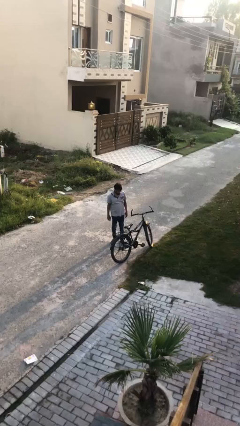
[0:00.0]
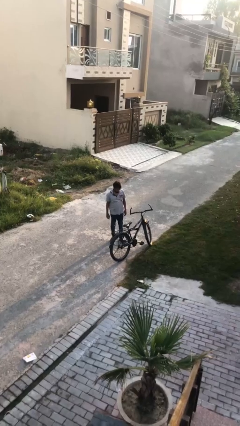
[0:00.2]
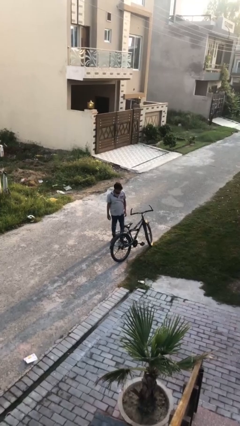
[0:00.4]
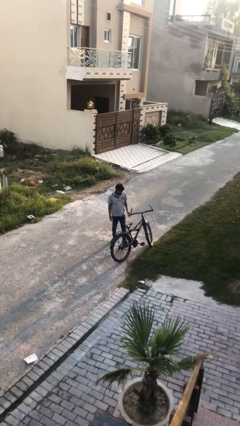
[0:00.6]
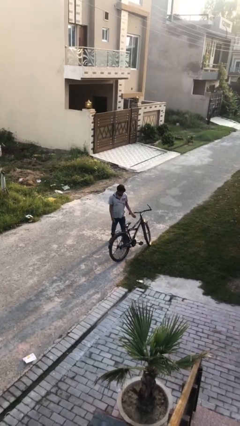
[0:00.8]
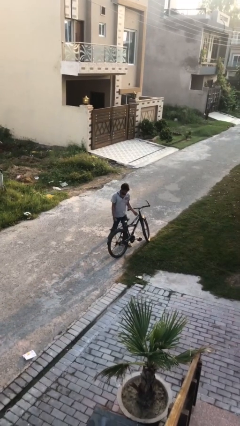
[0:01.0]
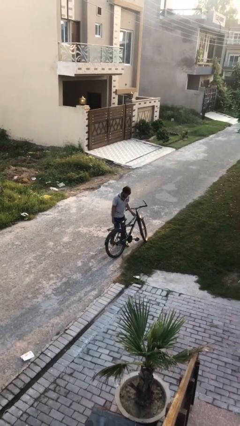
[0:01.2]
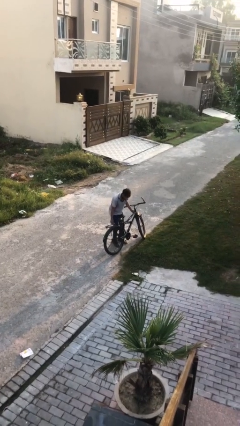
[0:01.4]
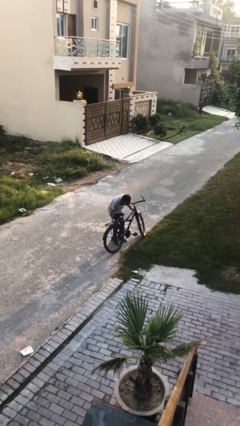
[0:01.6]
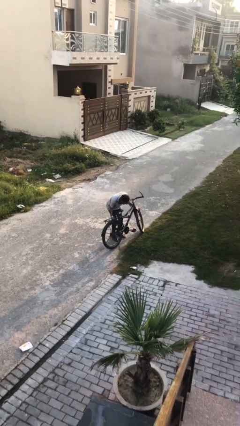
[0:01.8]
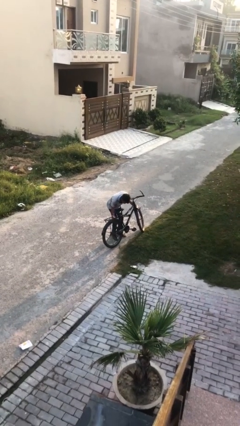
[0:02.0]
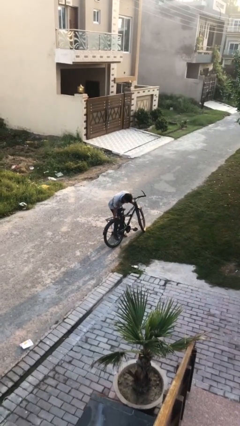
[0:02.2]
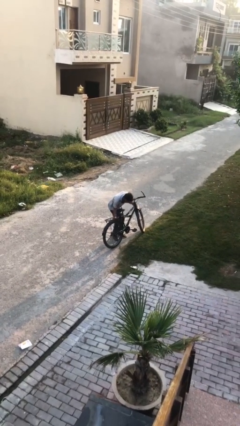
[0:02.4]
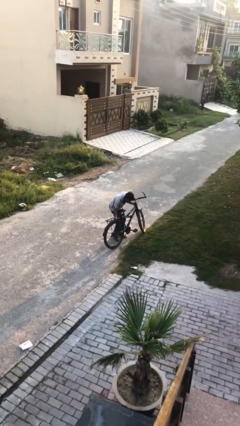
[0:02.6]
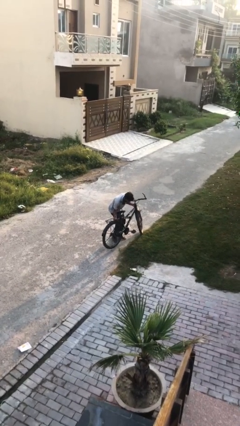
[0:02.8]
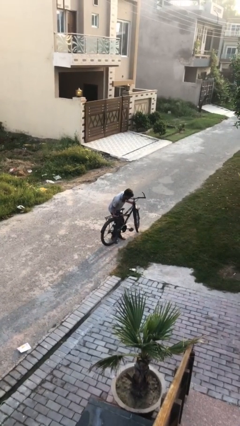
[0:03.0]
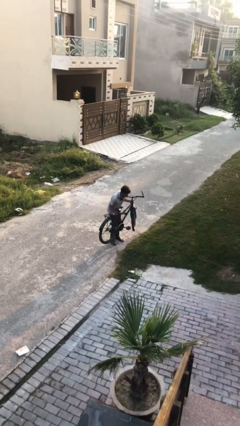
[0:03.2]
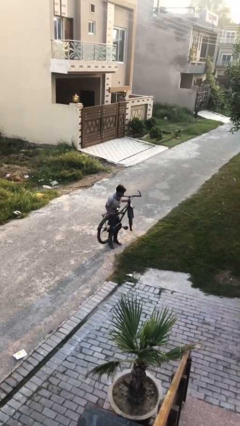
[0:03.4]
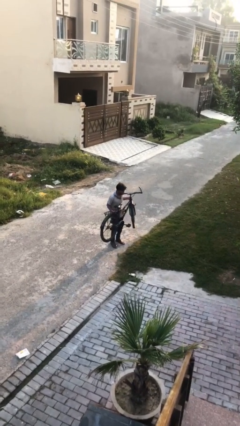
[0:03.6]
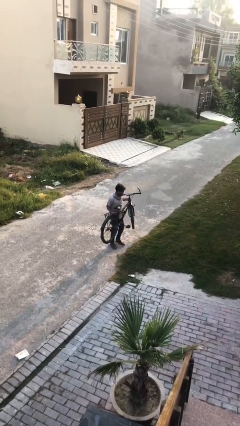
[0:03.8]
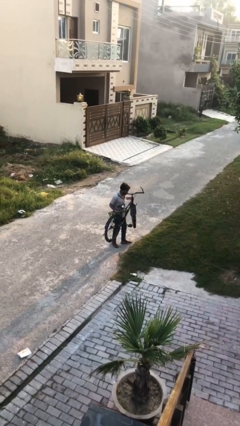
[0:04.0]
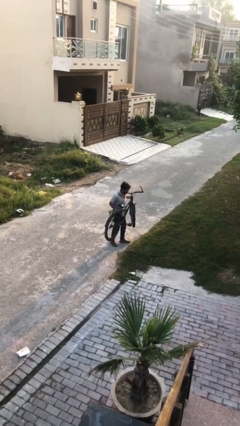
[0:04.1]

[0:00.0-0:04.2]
person picks up object from floor

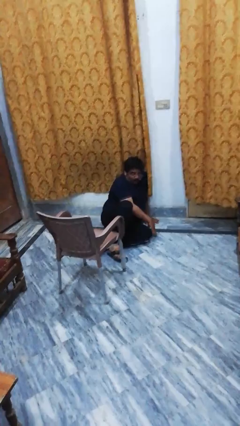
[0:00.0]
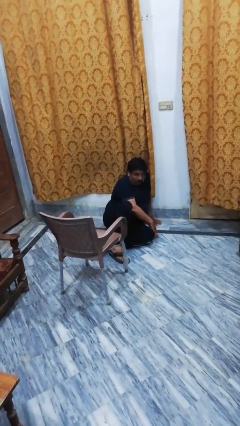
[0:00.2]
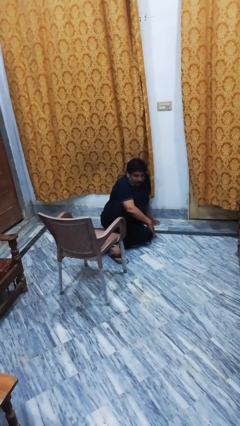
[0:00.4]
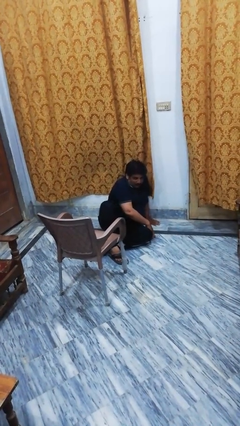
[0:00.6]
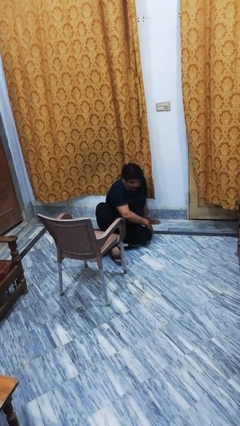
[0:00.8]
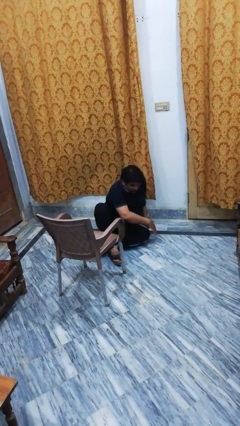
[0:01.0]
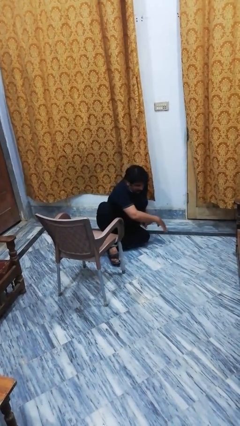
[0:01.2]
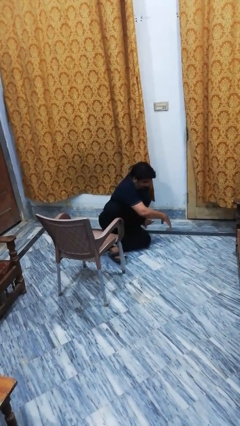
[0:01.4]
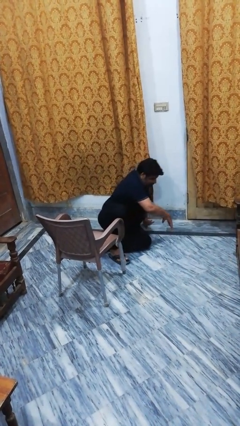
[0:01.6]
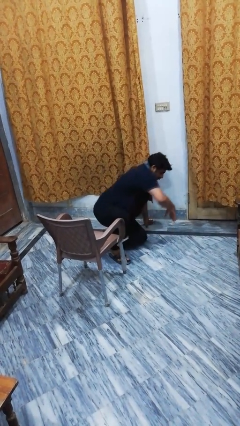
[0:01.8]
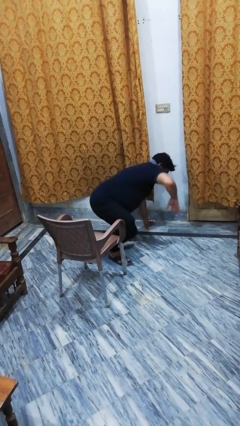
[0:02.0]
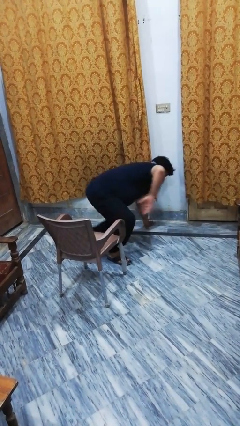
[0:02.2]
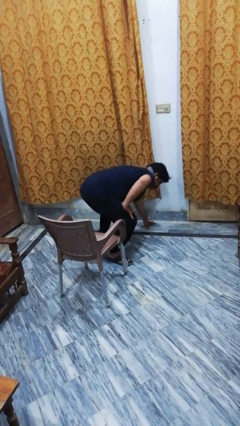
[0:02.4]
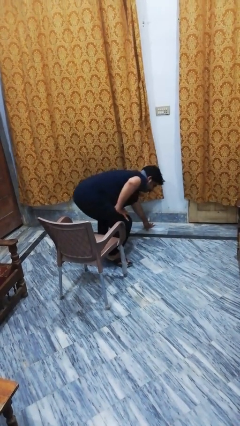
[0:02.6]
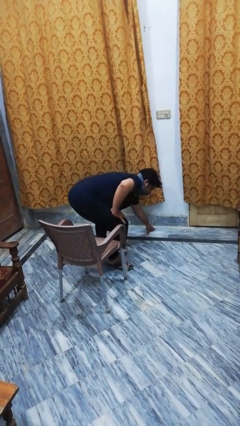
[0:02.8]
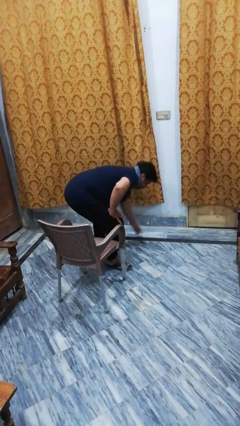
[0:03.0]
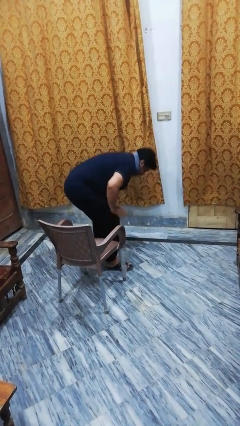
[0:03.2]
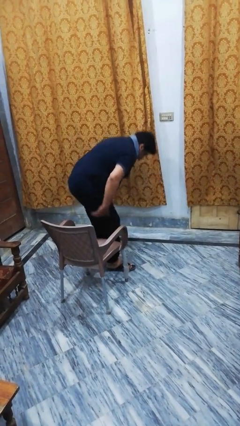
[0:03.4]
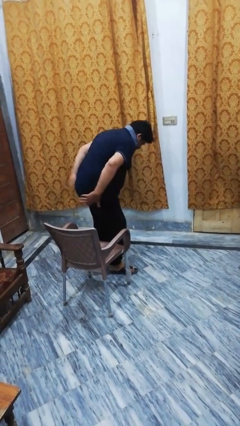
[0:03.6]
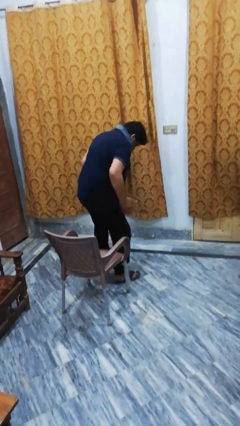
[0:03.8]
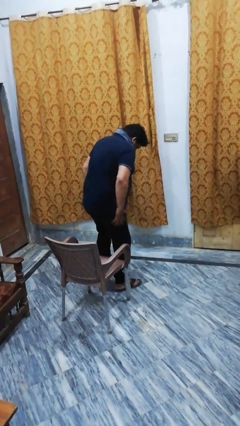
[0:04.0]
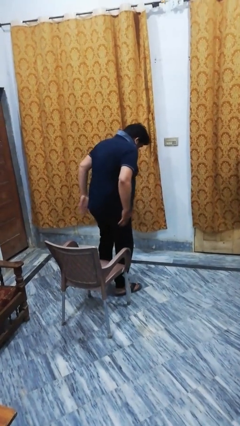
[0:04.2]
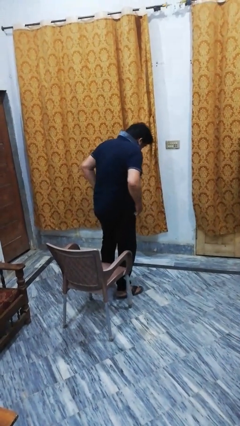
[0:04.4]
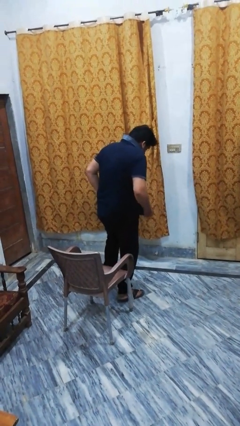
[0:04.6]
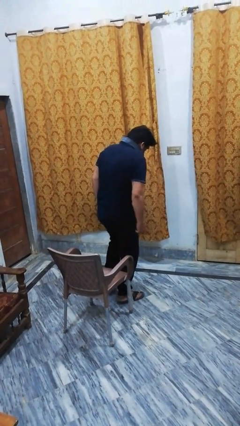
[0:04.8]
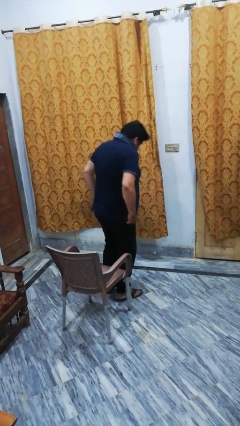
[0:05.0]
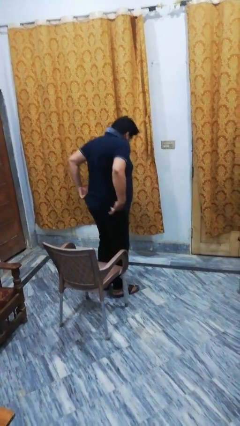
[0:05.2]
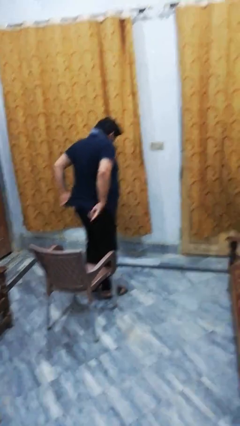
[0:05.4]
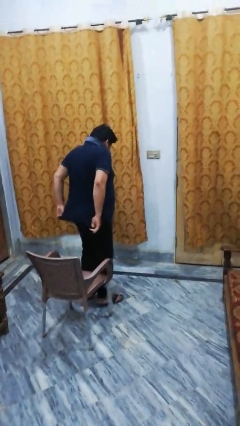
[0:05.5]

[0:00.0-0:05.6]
person stands up from floor

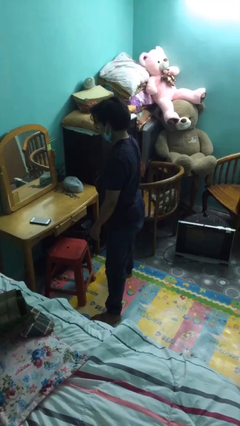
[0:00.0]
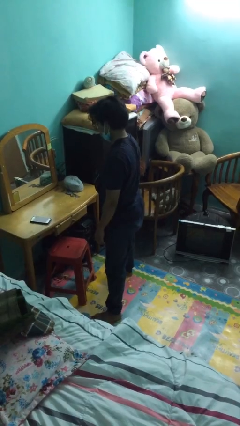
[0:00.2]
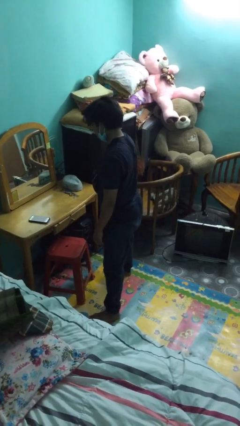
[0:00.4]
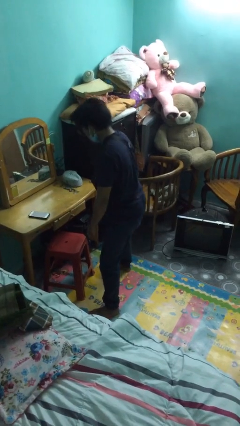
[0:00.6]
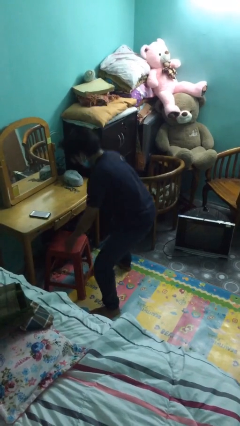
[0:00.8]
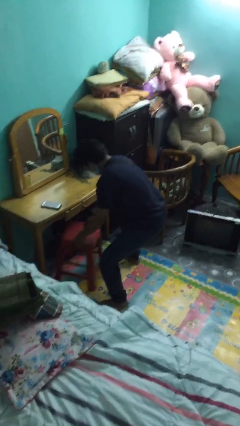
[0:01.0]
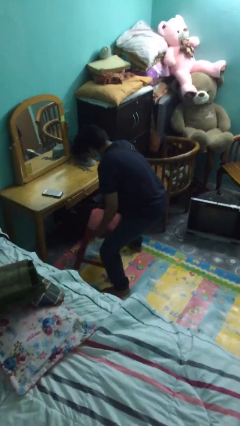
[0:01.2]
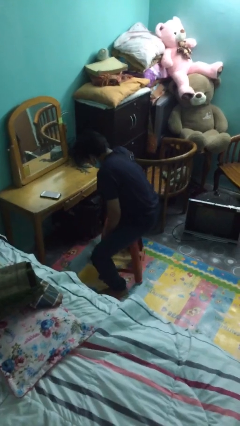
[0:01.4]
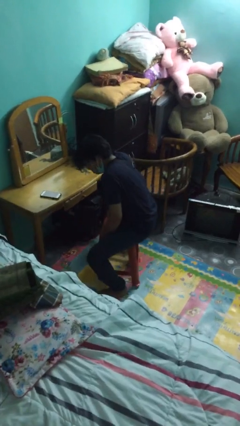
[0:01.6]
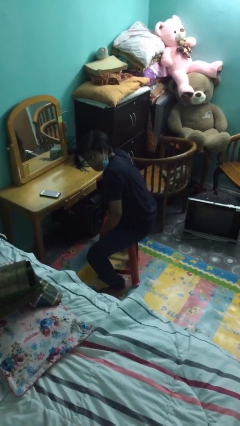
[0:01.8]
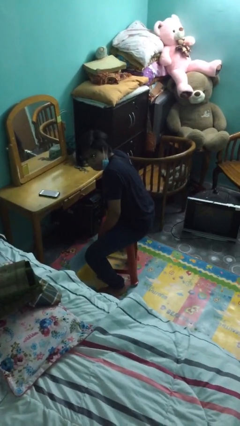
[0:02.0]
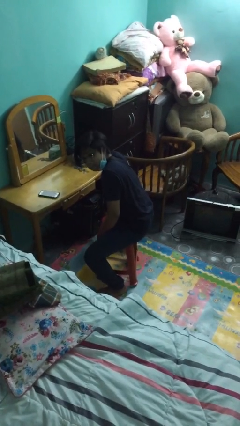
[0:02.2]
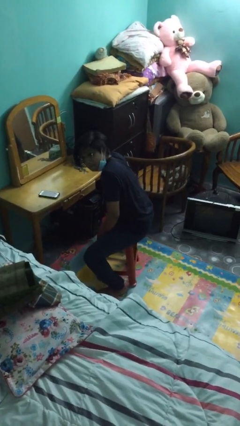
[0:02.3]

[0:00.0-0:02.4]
person sits down

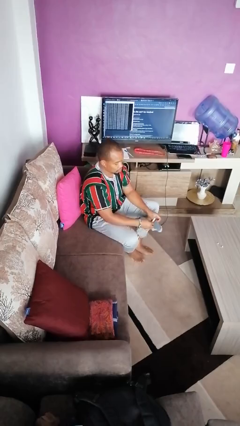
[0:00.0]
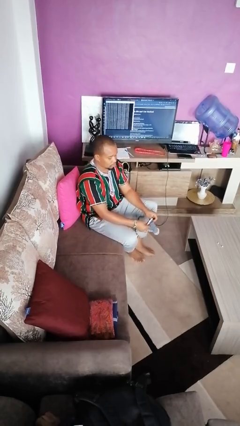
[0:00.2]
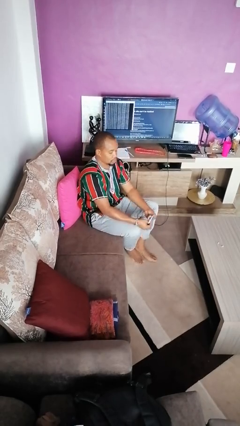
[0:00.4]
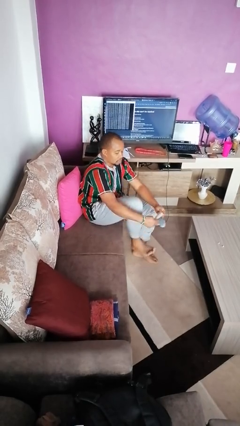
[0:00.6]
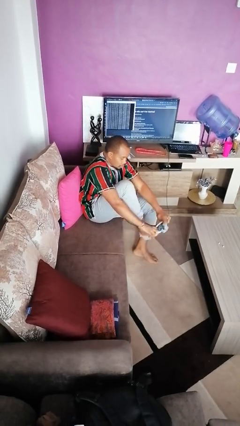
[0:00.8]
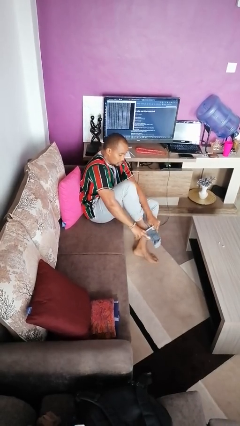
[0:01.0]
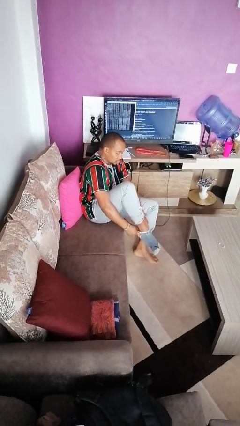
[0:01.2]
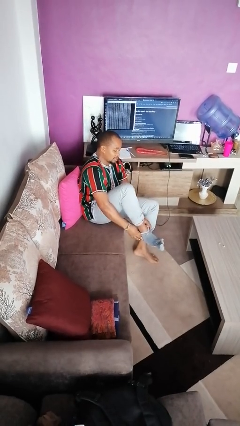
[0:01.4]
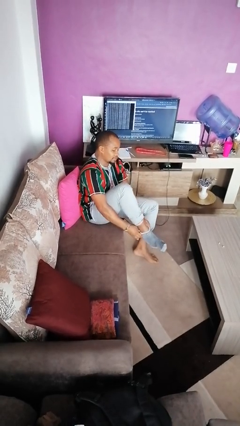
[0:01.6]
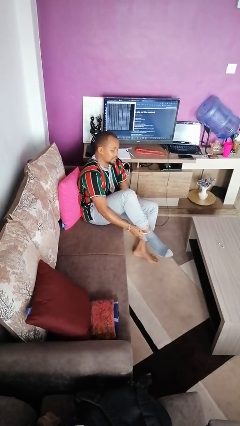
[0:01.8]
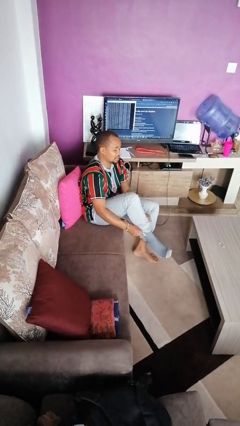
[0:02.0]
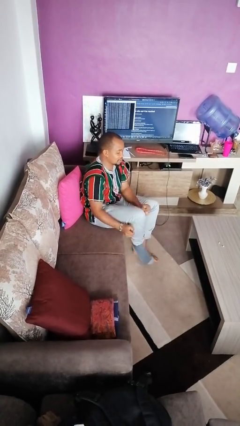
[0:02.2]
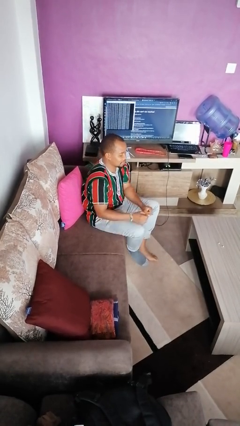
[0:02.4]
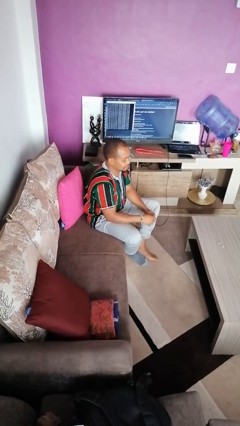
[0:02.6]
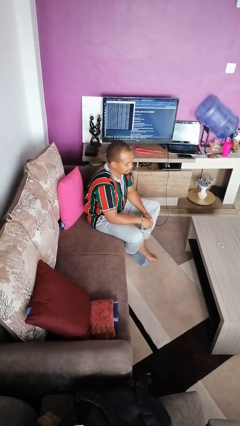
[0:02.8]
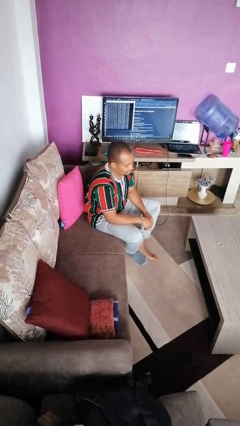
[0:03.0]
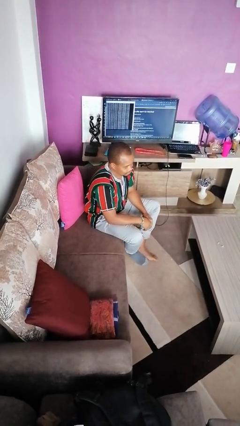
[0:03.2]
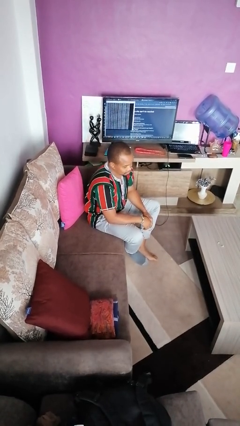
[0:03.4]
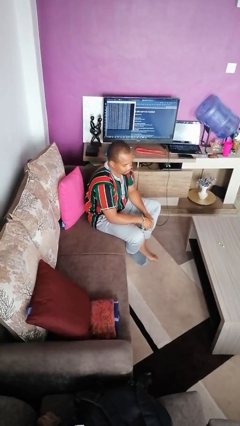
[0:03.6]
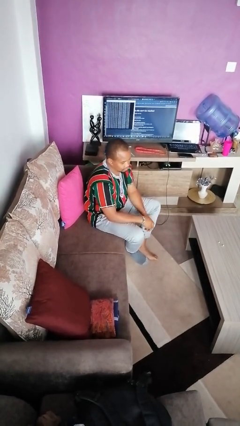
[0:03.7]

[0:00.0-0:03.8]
person puts on socks

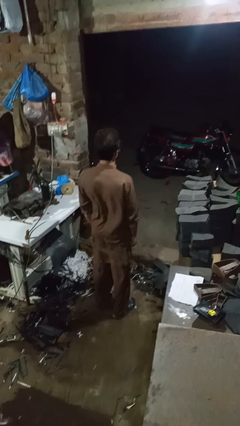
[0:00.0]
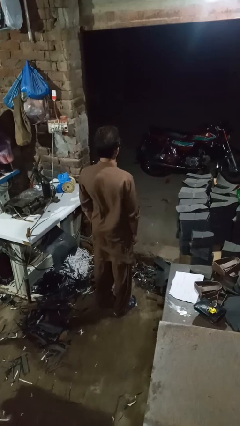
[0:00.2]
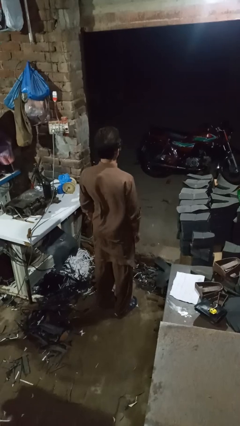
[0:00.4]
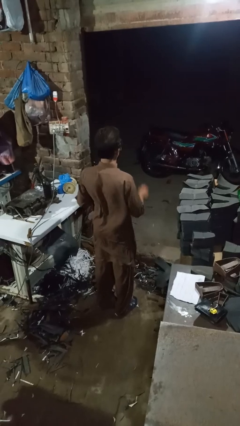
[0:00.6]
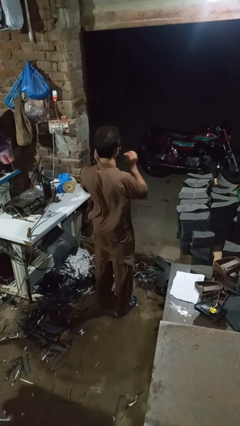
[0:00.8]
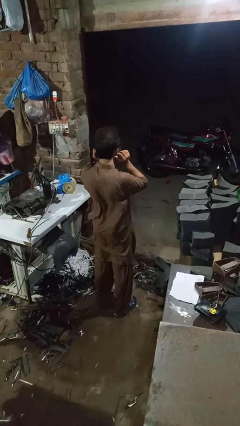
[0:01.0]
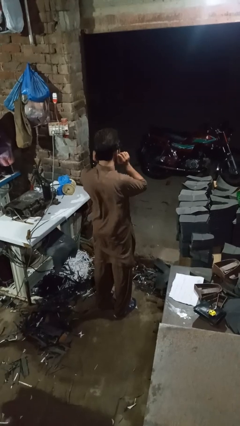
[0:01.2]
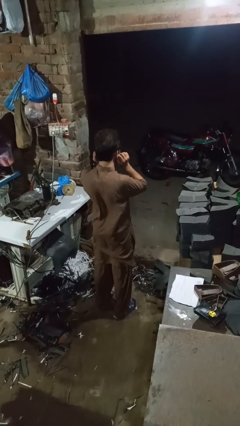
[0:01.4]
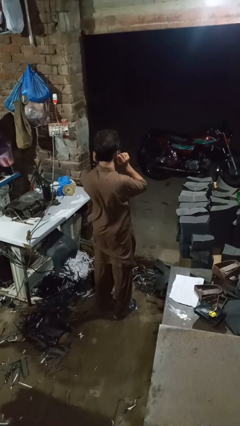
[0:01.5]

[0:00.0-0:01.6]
person touches earlobe
